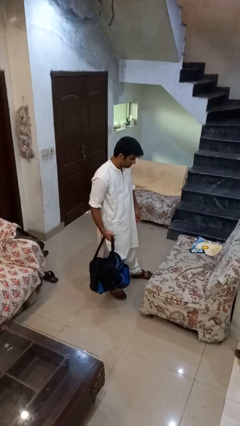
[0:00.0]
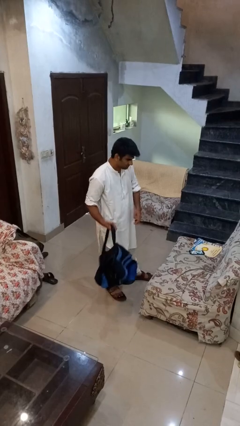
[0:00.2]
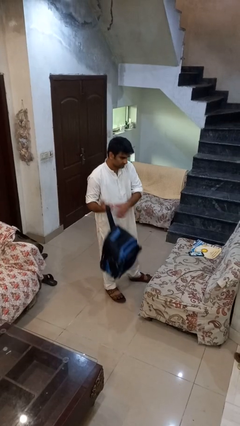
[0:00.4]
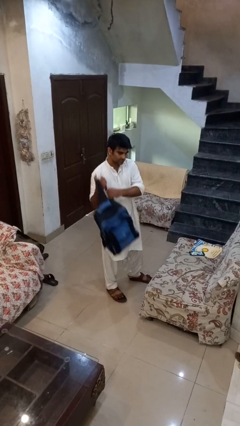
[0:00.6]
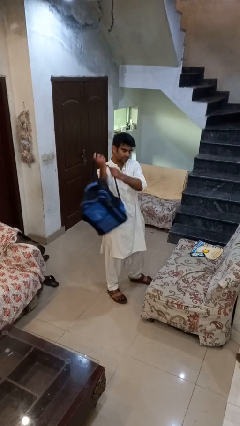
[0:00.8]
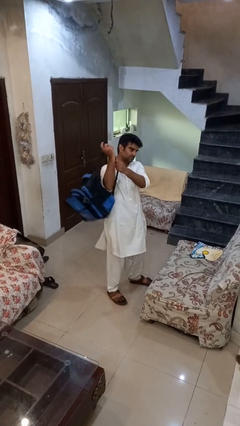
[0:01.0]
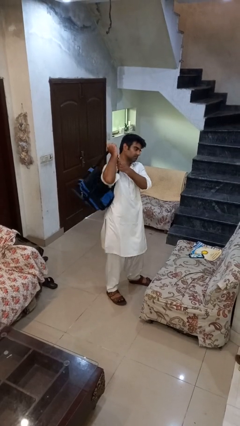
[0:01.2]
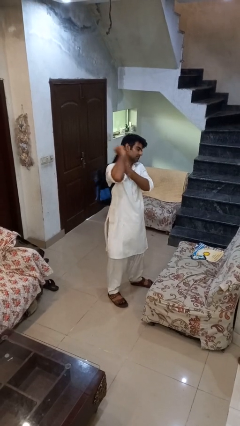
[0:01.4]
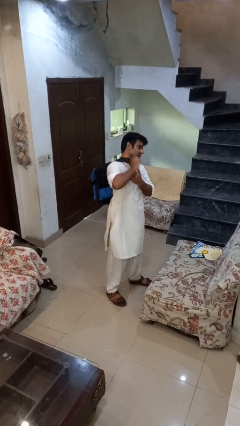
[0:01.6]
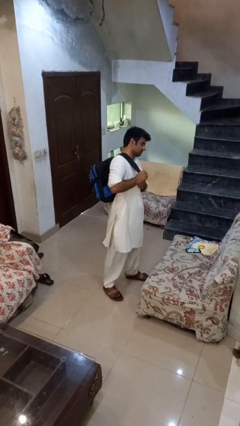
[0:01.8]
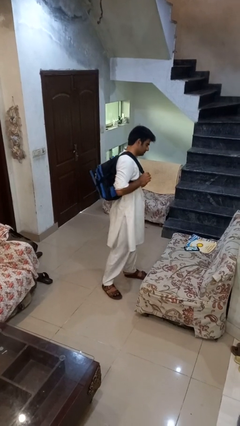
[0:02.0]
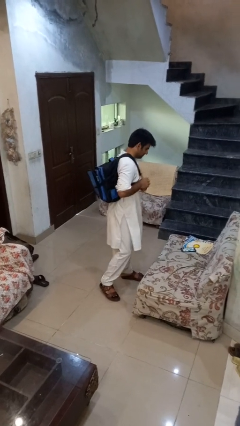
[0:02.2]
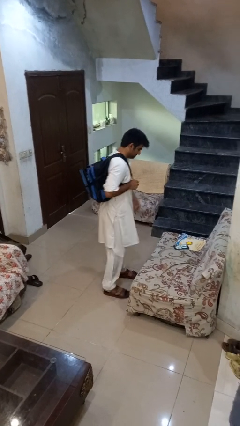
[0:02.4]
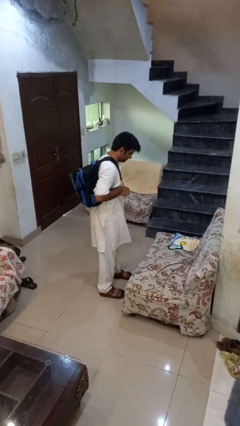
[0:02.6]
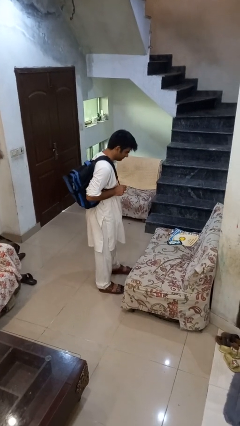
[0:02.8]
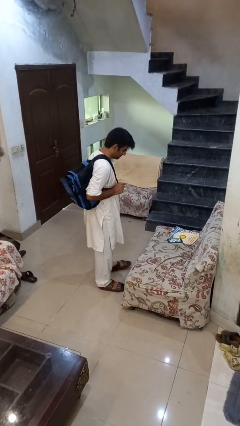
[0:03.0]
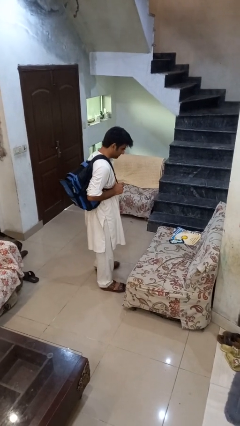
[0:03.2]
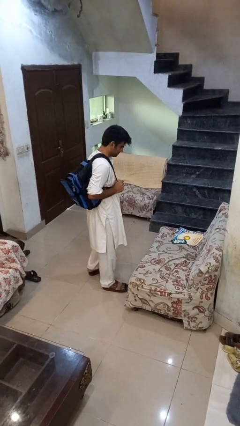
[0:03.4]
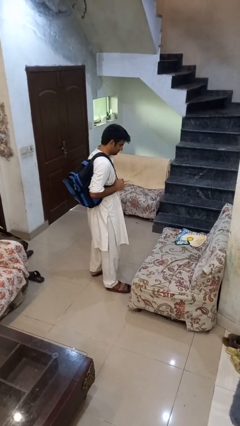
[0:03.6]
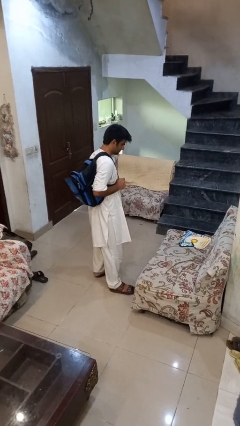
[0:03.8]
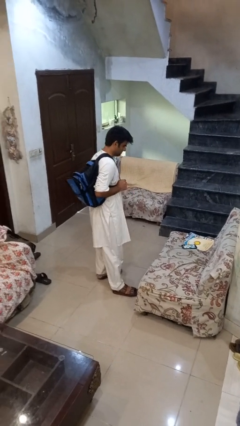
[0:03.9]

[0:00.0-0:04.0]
person puts on backpack

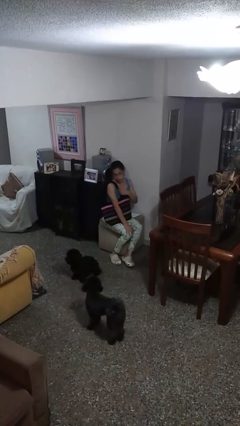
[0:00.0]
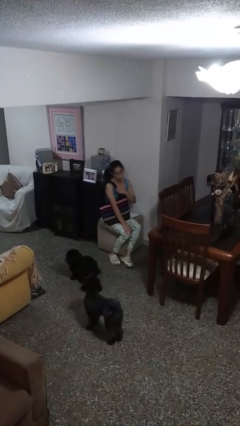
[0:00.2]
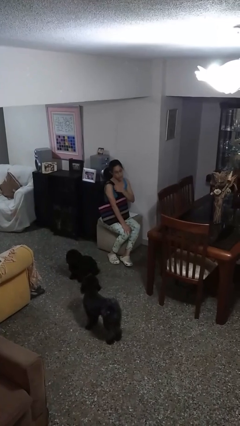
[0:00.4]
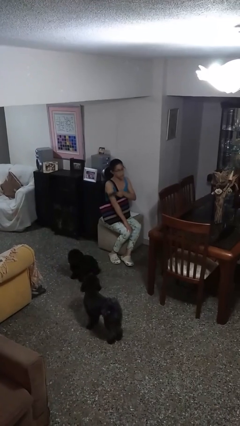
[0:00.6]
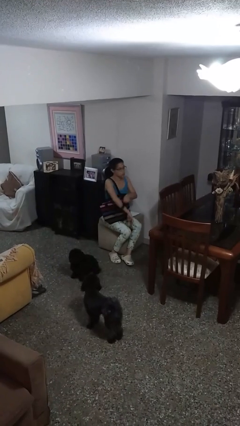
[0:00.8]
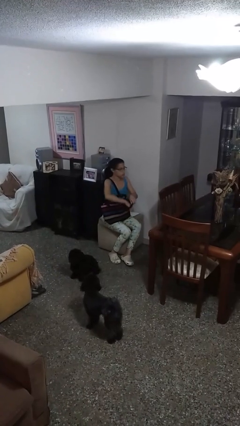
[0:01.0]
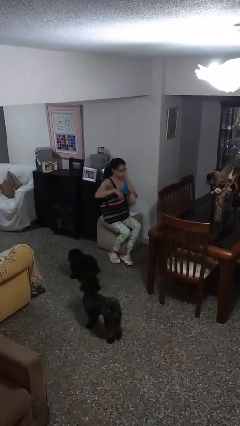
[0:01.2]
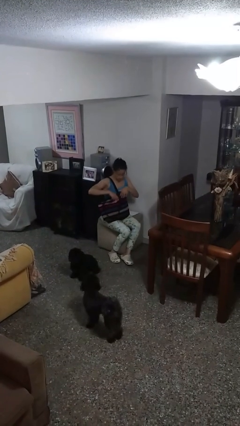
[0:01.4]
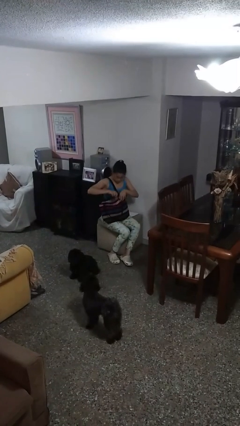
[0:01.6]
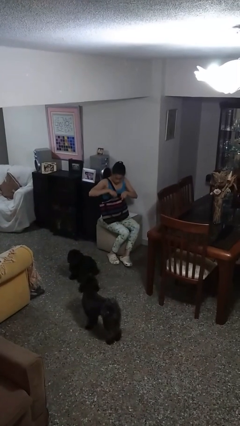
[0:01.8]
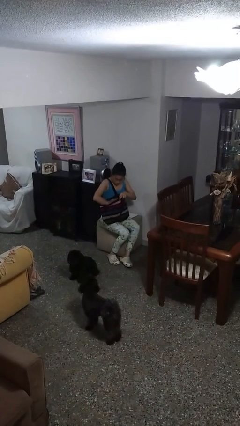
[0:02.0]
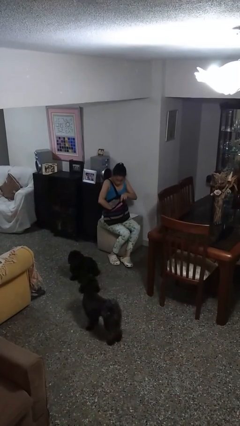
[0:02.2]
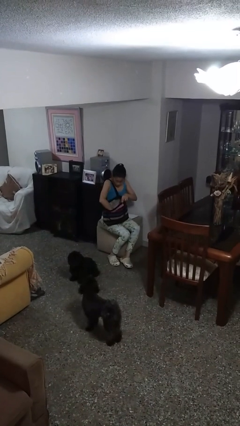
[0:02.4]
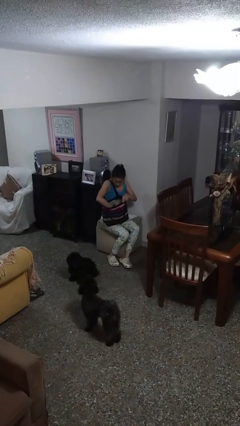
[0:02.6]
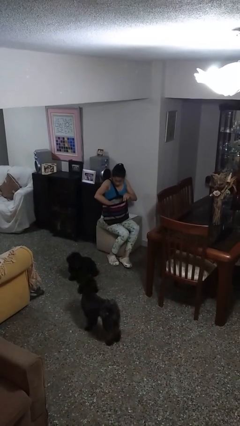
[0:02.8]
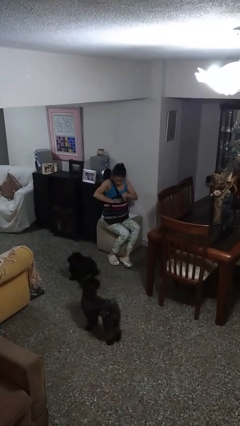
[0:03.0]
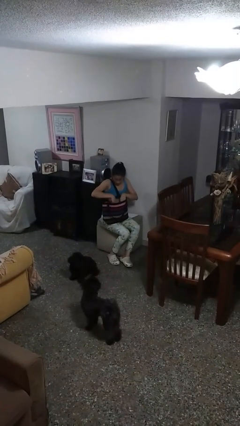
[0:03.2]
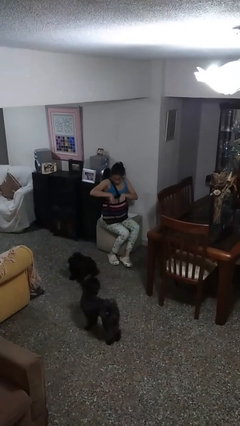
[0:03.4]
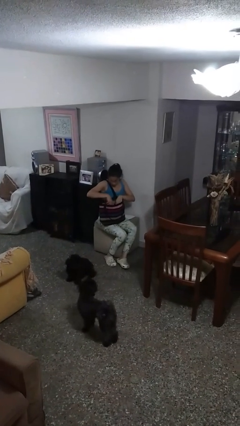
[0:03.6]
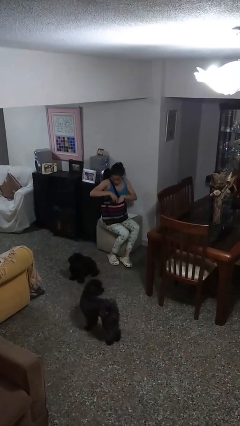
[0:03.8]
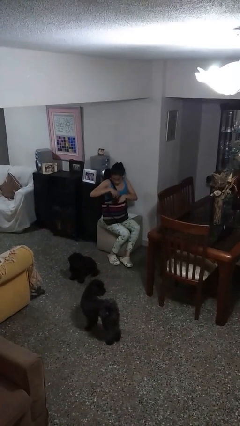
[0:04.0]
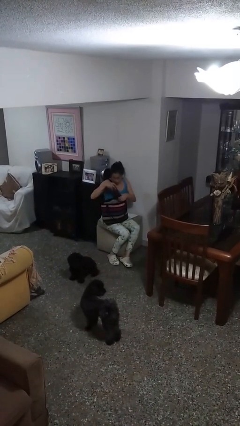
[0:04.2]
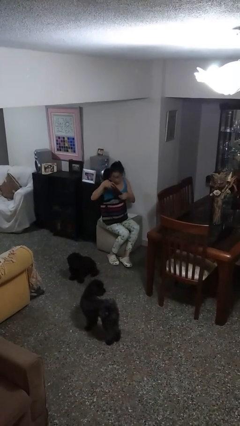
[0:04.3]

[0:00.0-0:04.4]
person searches in purse

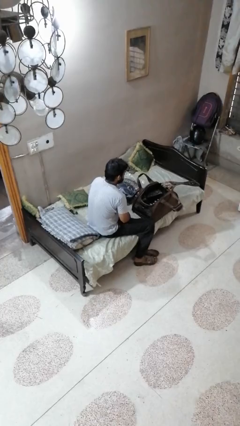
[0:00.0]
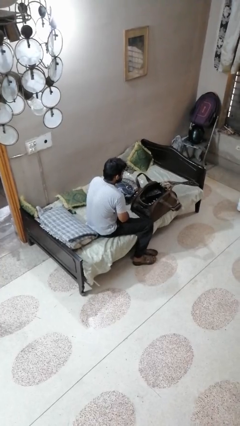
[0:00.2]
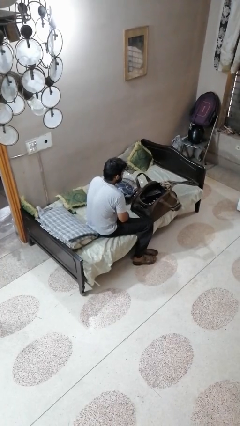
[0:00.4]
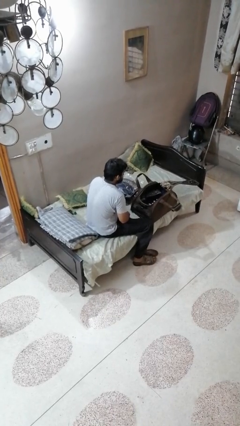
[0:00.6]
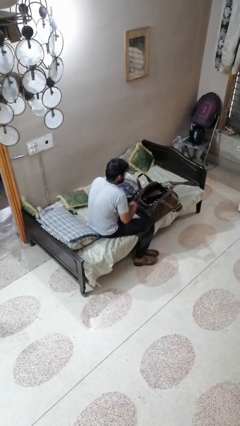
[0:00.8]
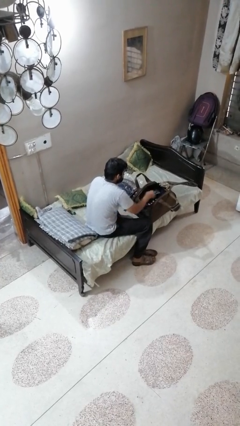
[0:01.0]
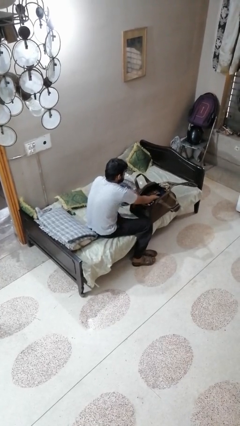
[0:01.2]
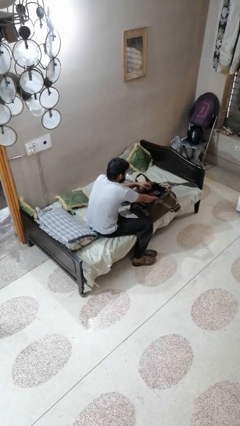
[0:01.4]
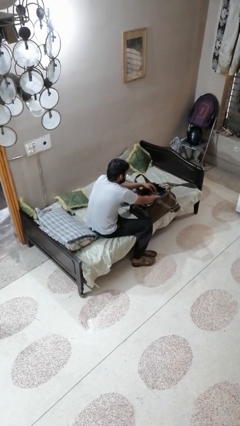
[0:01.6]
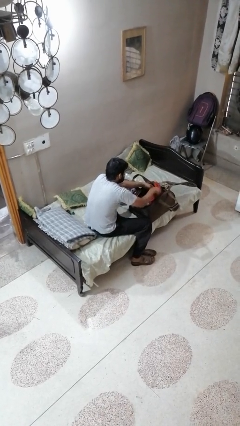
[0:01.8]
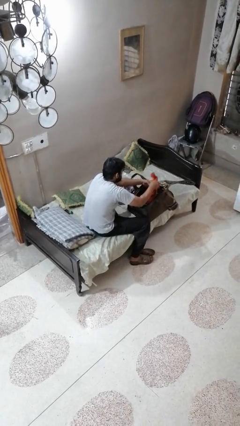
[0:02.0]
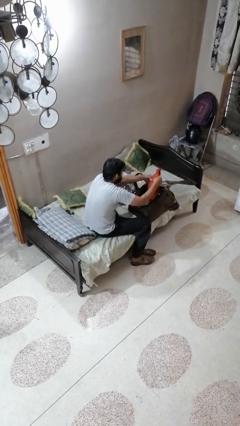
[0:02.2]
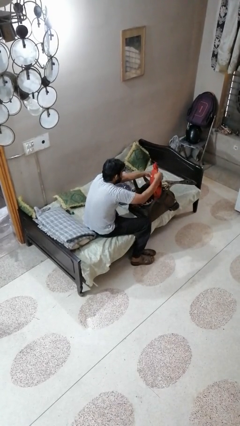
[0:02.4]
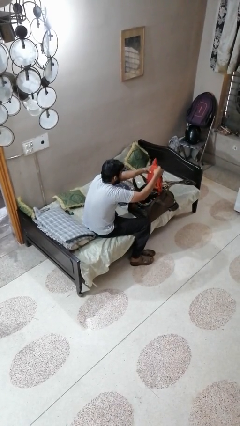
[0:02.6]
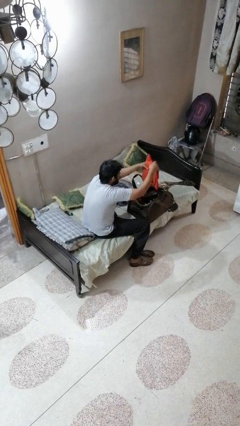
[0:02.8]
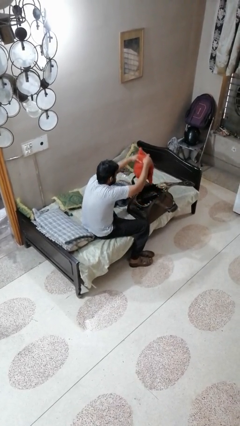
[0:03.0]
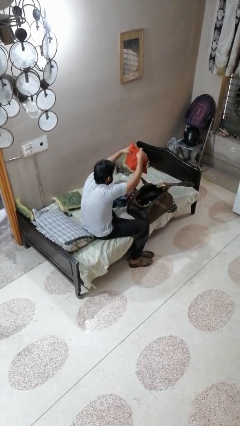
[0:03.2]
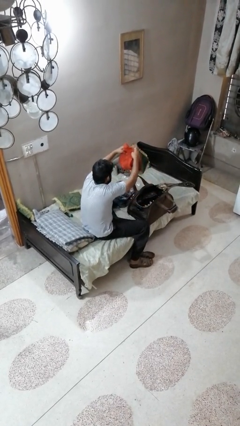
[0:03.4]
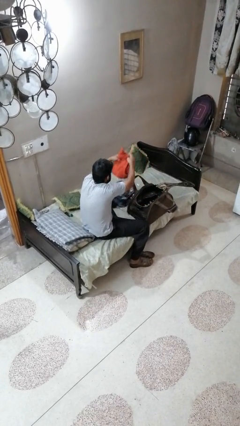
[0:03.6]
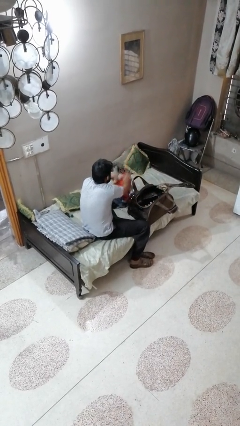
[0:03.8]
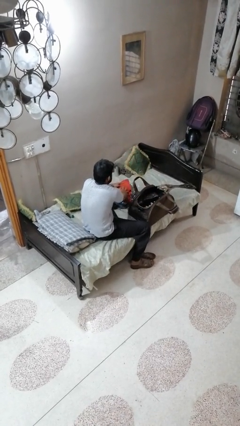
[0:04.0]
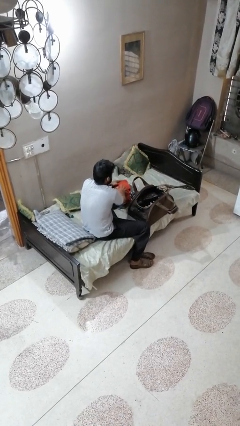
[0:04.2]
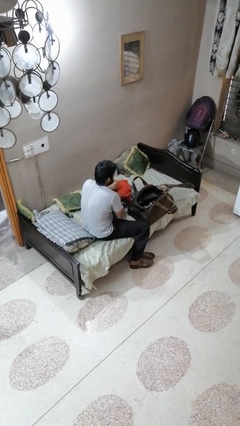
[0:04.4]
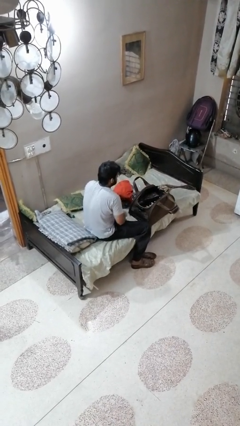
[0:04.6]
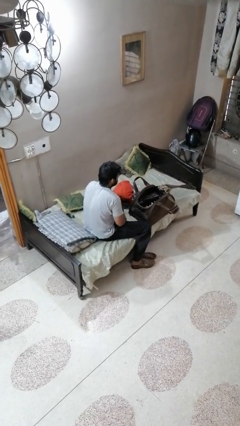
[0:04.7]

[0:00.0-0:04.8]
person unloads clothes from suitcase

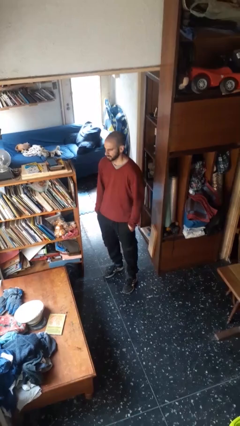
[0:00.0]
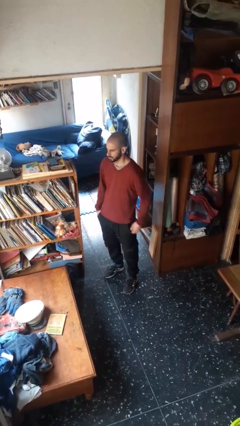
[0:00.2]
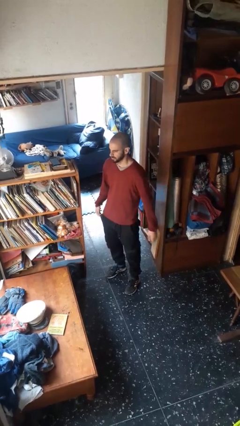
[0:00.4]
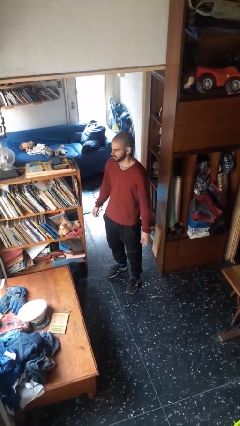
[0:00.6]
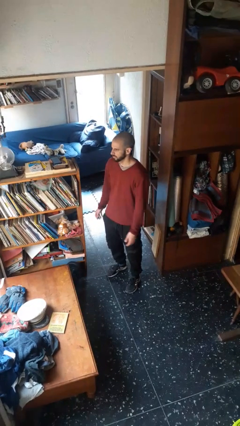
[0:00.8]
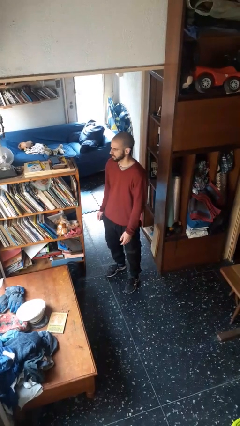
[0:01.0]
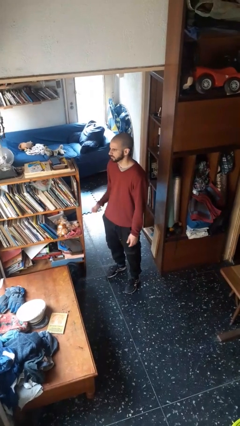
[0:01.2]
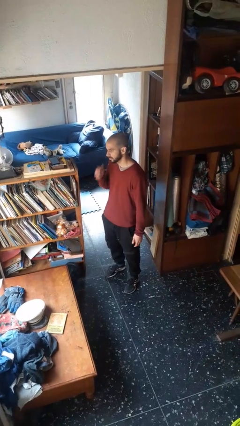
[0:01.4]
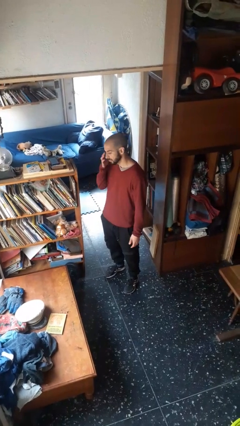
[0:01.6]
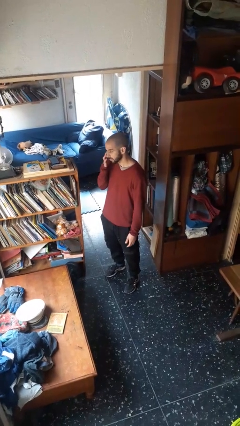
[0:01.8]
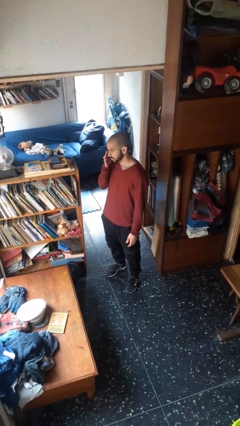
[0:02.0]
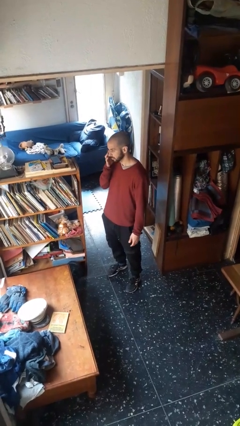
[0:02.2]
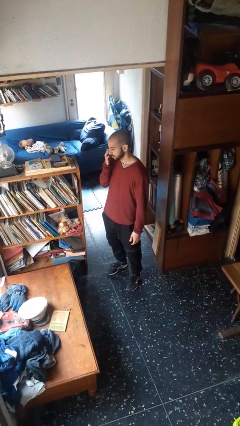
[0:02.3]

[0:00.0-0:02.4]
person puts hands in back pockets

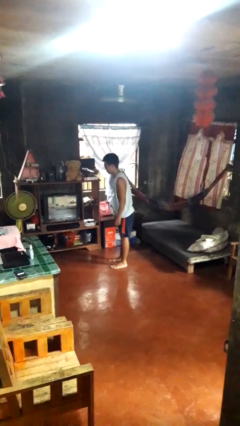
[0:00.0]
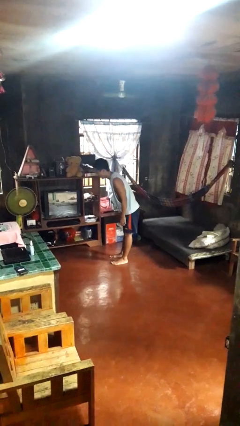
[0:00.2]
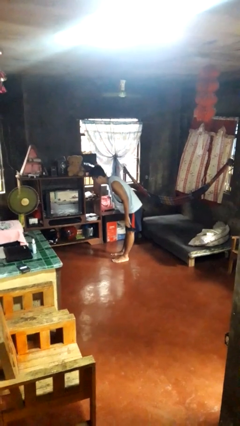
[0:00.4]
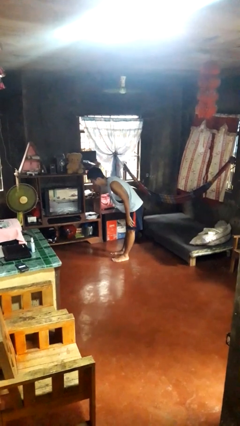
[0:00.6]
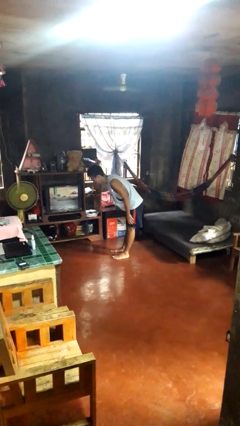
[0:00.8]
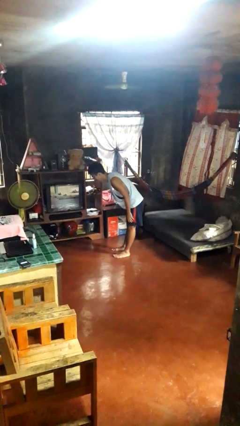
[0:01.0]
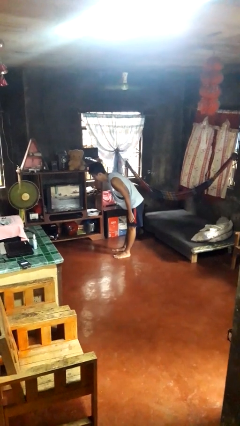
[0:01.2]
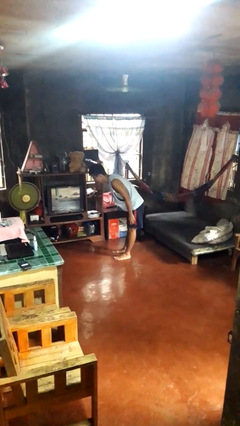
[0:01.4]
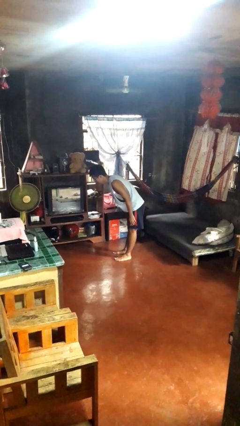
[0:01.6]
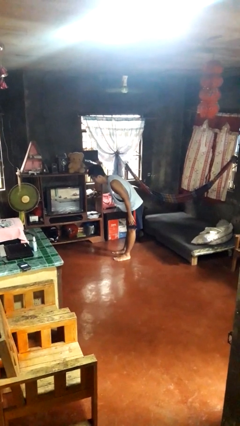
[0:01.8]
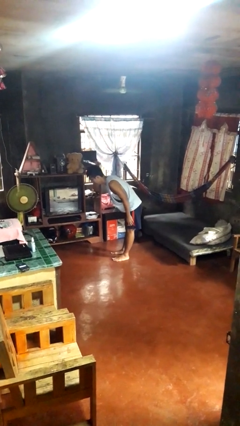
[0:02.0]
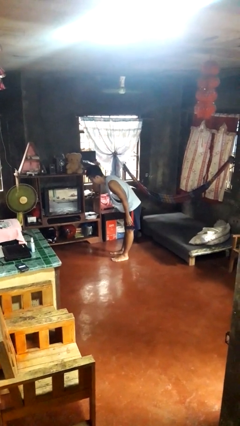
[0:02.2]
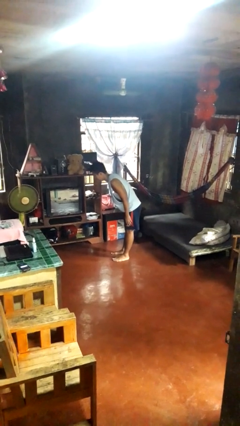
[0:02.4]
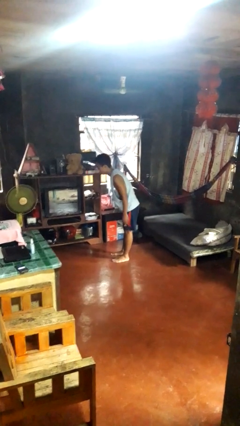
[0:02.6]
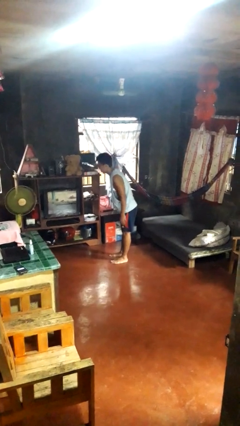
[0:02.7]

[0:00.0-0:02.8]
person bows
